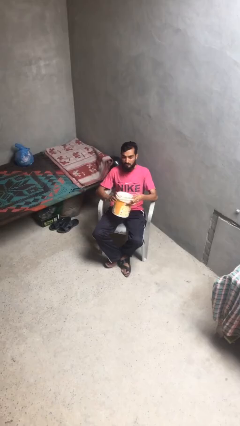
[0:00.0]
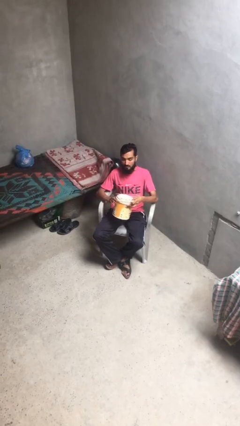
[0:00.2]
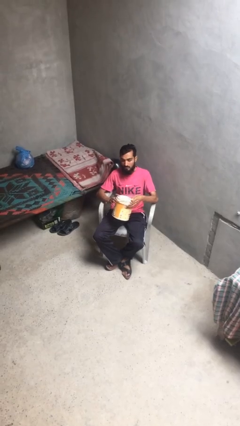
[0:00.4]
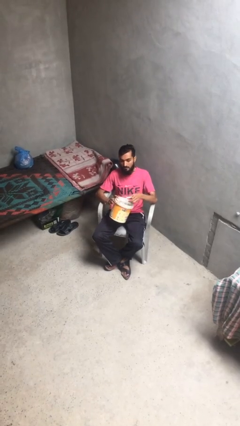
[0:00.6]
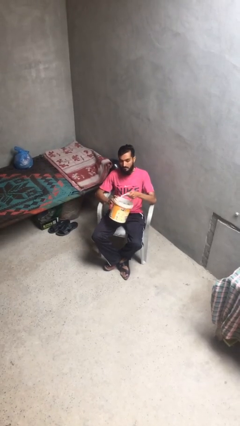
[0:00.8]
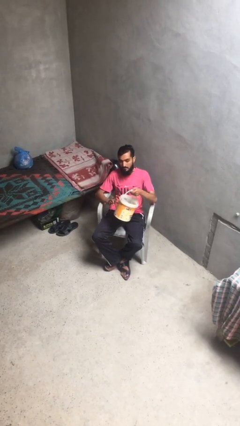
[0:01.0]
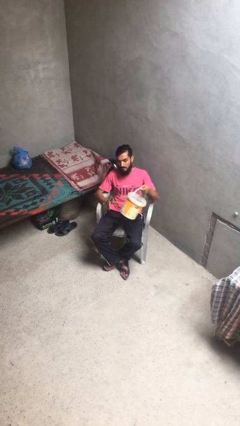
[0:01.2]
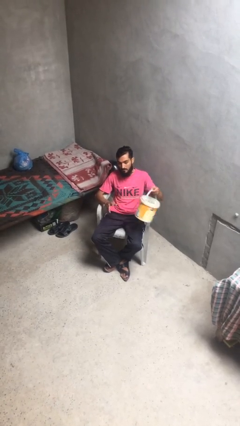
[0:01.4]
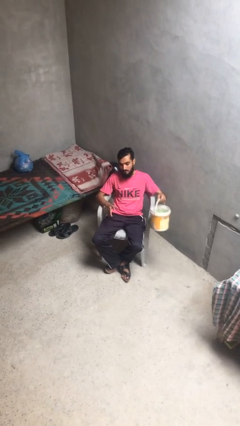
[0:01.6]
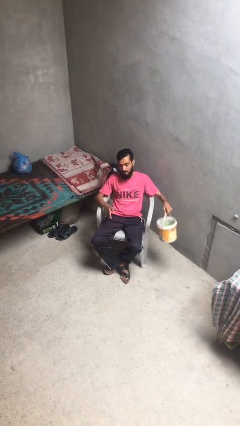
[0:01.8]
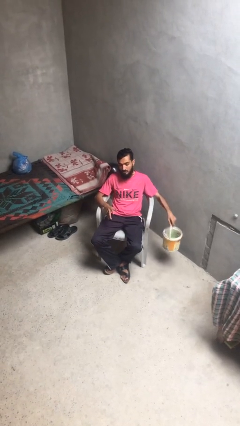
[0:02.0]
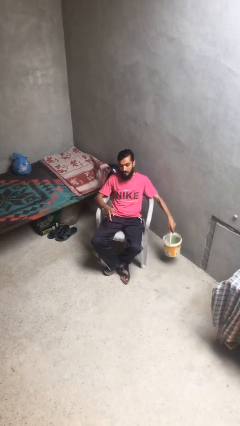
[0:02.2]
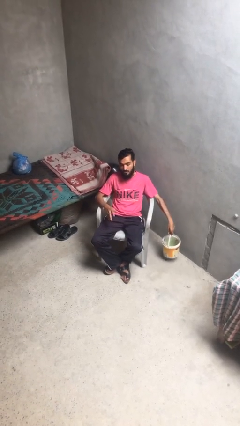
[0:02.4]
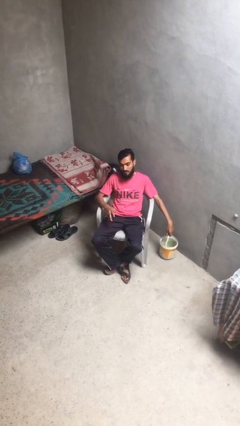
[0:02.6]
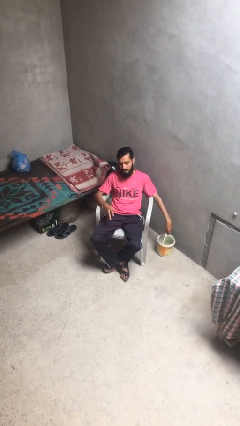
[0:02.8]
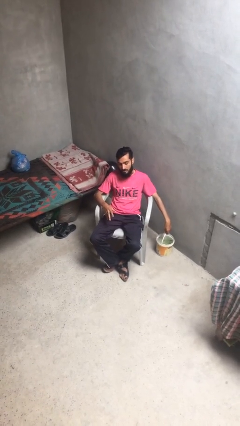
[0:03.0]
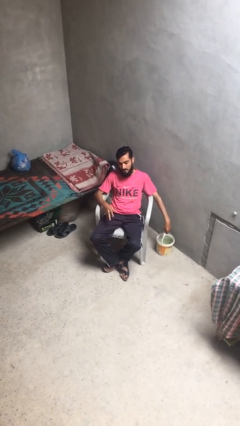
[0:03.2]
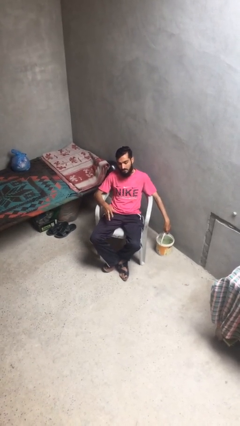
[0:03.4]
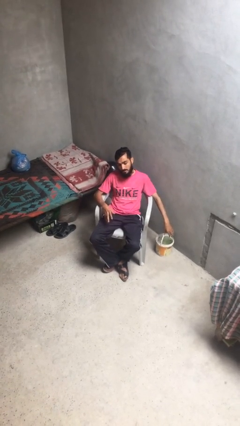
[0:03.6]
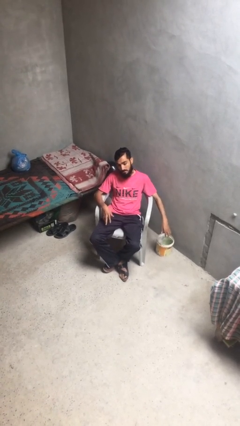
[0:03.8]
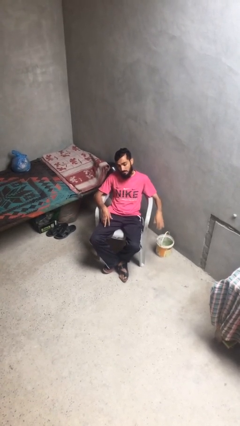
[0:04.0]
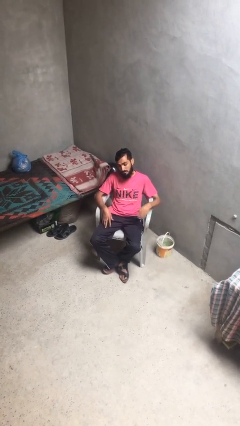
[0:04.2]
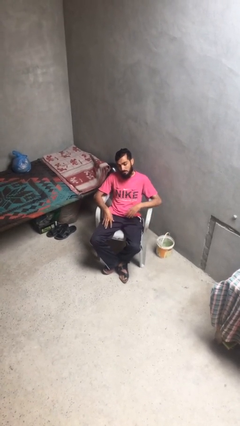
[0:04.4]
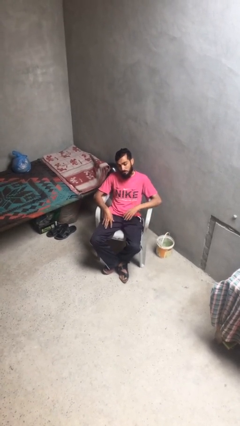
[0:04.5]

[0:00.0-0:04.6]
person puts down object on floor

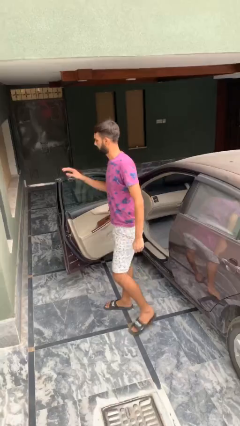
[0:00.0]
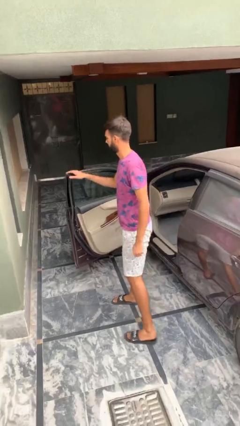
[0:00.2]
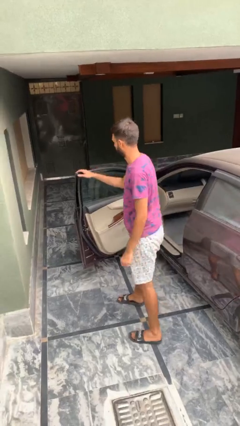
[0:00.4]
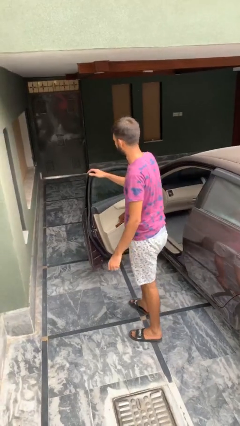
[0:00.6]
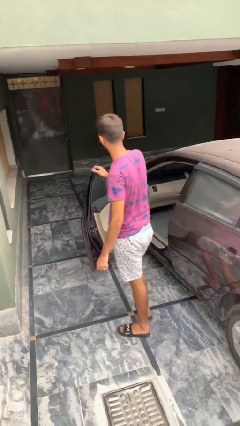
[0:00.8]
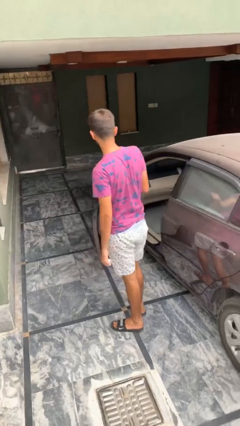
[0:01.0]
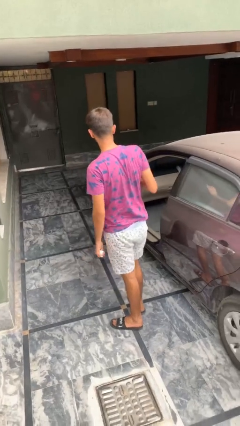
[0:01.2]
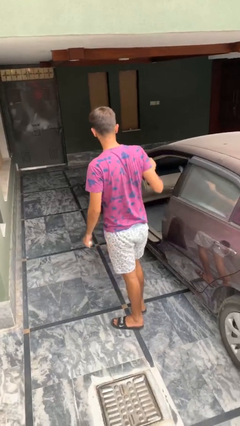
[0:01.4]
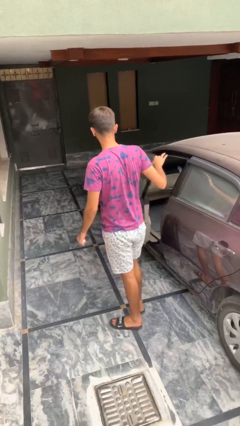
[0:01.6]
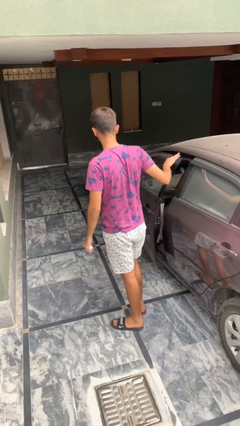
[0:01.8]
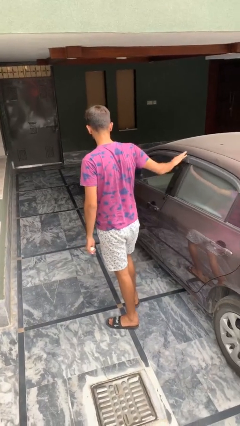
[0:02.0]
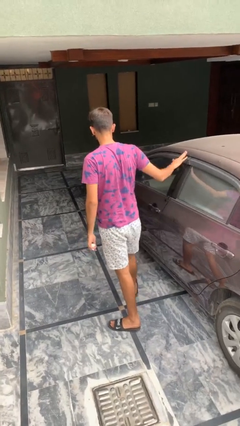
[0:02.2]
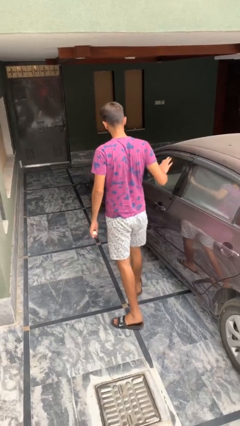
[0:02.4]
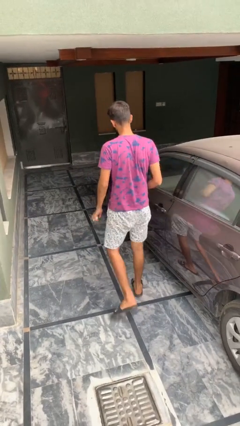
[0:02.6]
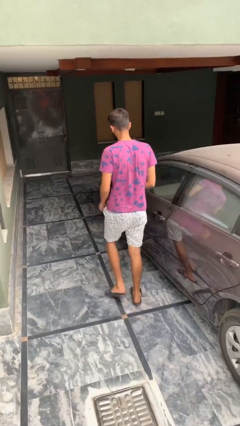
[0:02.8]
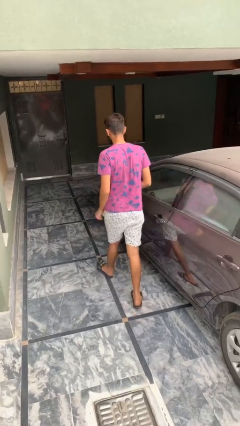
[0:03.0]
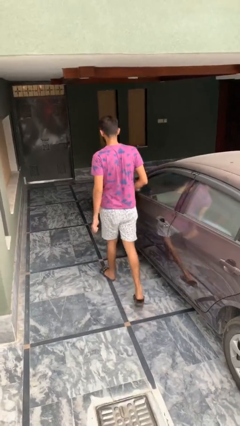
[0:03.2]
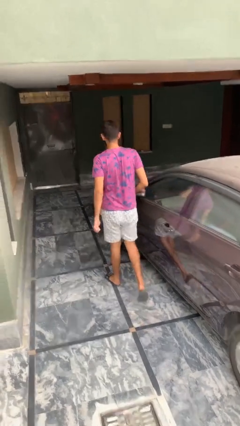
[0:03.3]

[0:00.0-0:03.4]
person closes car door

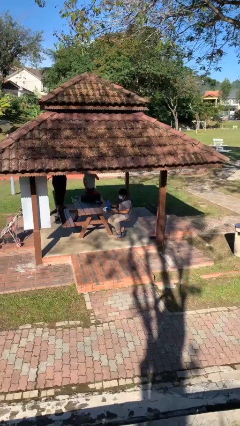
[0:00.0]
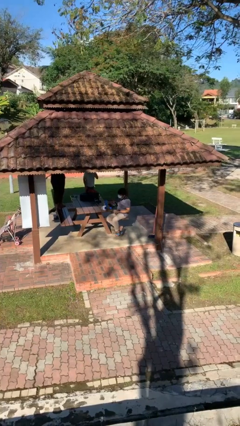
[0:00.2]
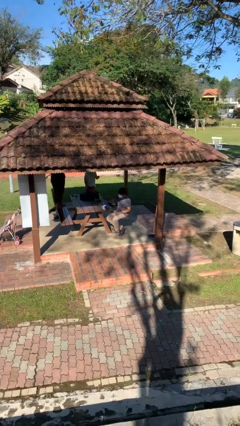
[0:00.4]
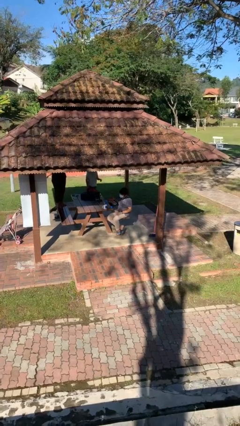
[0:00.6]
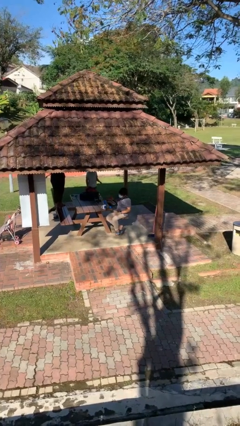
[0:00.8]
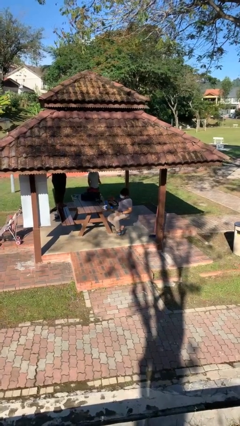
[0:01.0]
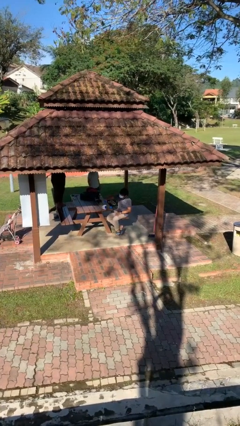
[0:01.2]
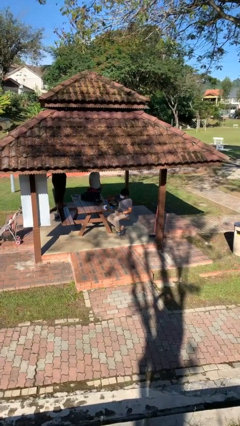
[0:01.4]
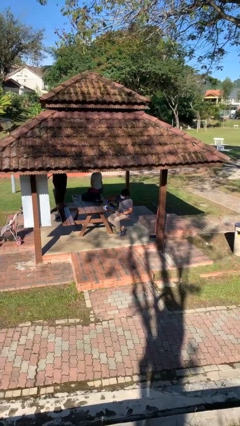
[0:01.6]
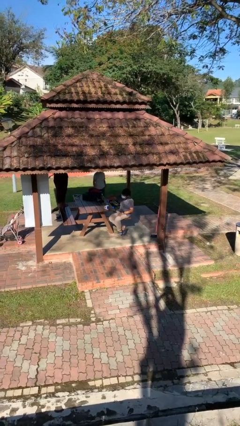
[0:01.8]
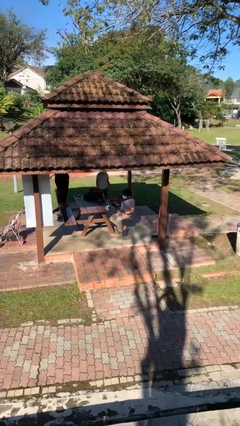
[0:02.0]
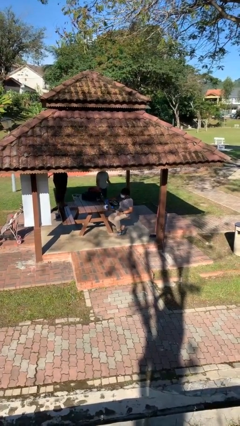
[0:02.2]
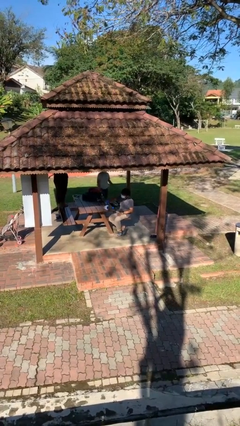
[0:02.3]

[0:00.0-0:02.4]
person pours liquid into cup

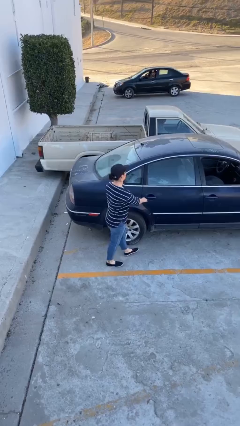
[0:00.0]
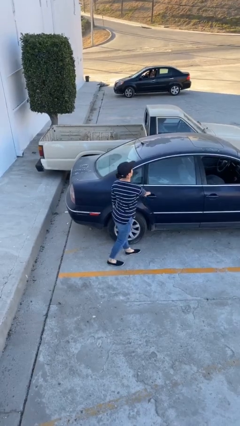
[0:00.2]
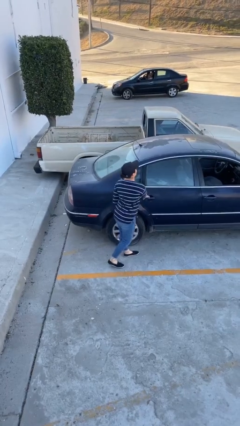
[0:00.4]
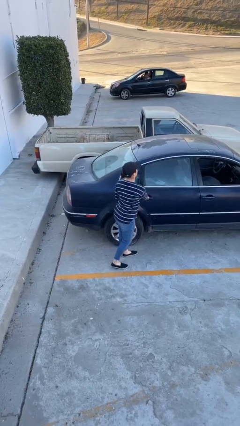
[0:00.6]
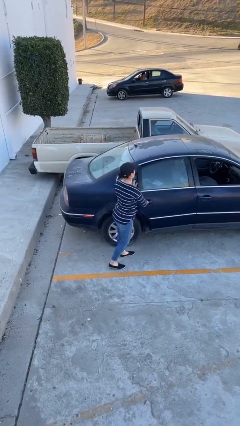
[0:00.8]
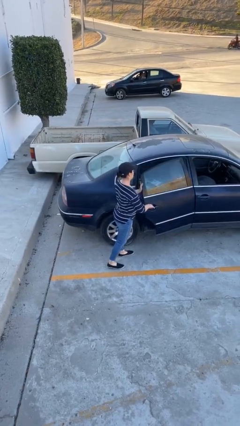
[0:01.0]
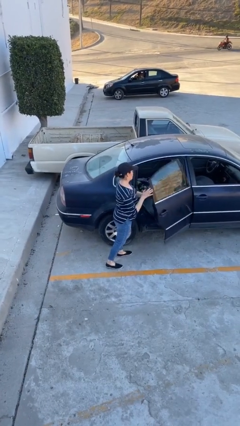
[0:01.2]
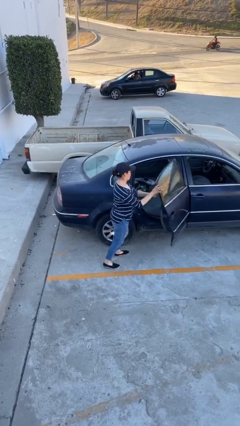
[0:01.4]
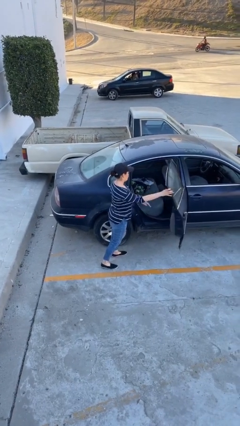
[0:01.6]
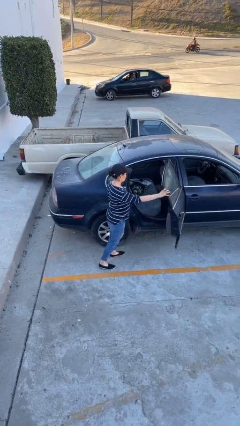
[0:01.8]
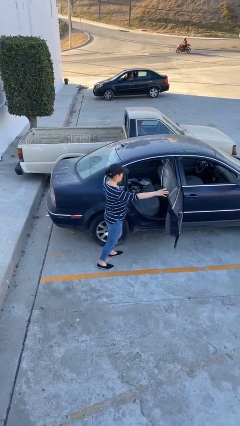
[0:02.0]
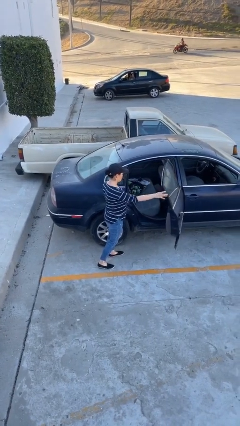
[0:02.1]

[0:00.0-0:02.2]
person opens car door

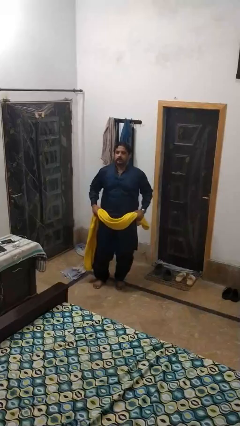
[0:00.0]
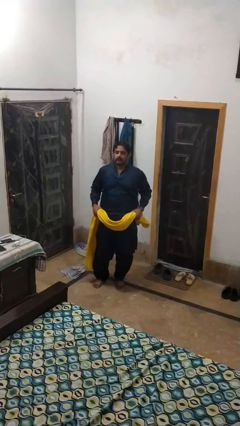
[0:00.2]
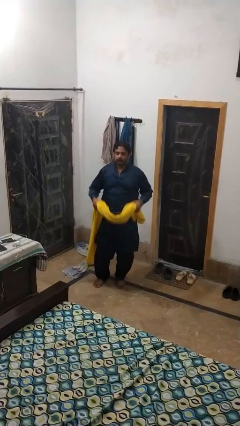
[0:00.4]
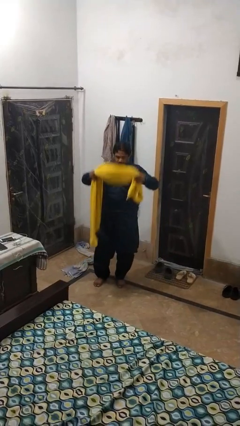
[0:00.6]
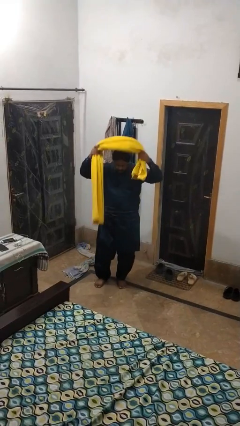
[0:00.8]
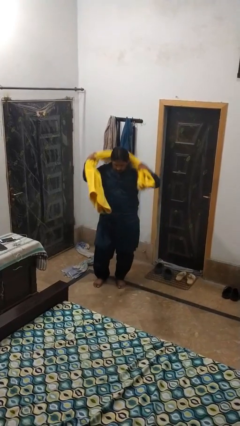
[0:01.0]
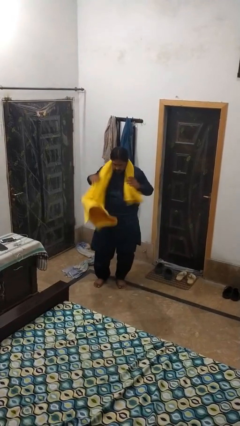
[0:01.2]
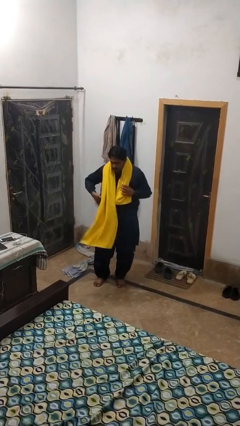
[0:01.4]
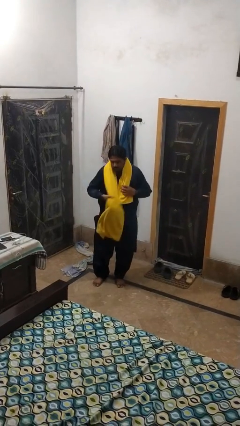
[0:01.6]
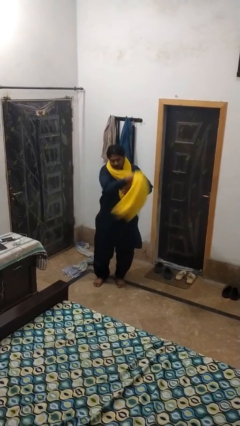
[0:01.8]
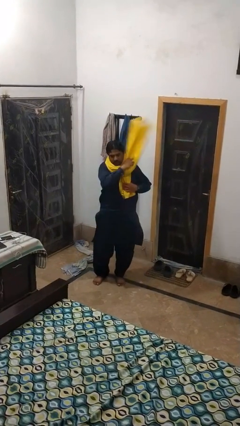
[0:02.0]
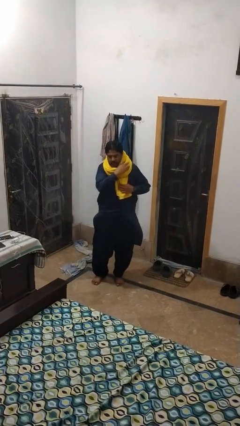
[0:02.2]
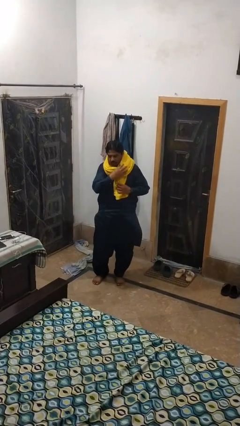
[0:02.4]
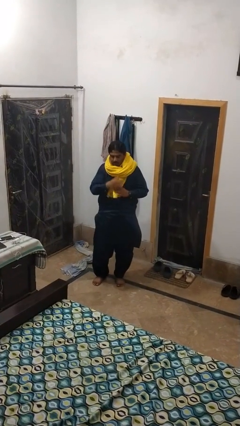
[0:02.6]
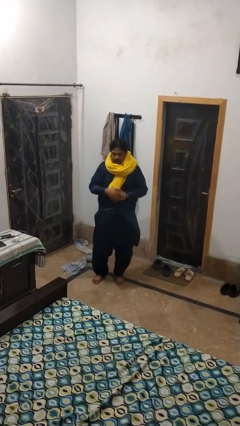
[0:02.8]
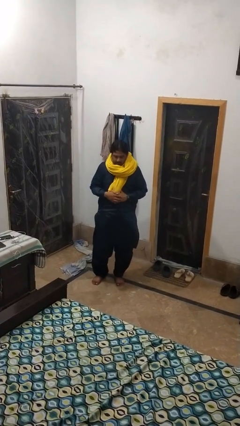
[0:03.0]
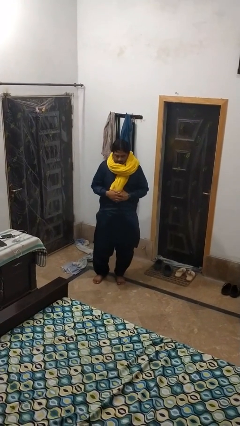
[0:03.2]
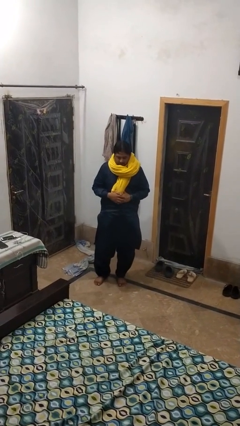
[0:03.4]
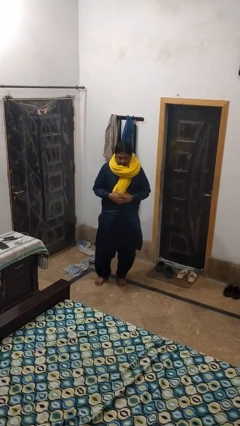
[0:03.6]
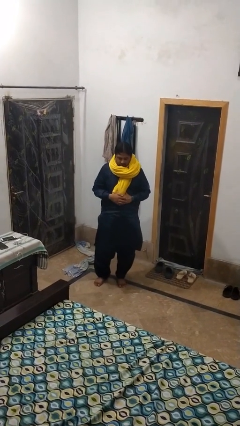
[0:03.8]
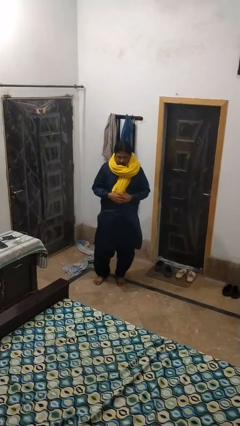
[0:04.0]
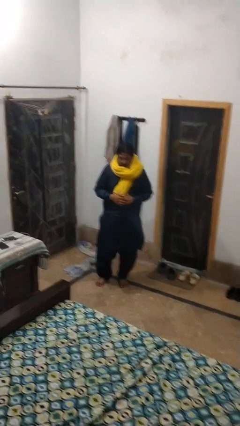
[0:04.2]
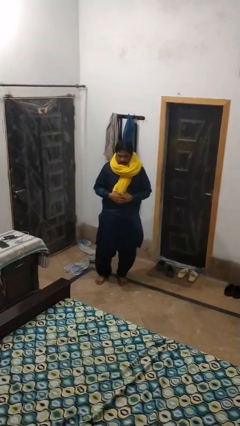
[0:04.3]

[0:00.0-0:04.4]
person puts on scarf

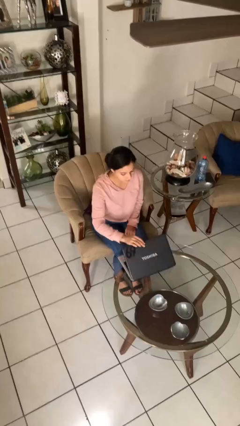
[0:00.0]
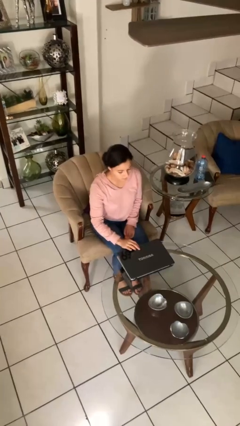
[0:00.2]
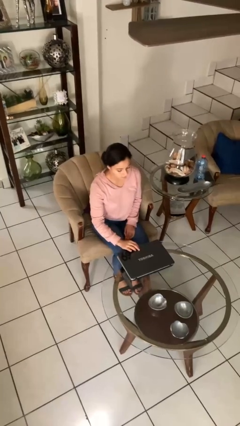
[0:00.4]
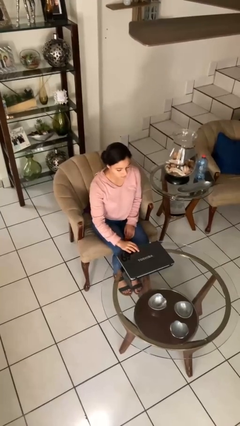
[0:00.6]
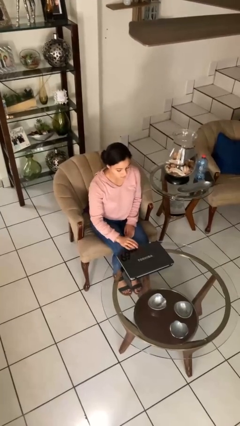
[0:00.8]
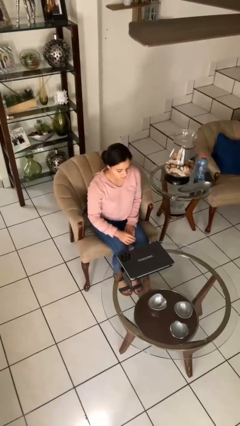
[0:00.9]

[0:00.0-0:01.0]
person closes laptop
